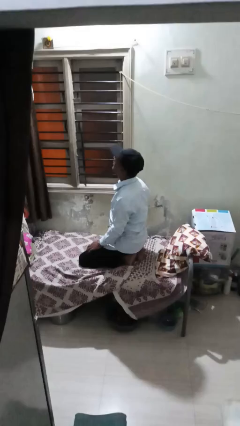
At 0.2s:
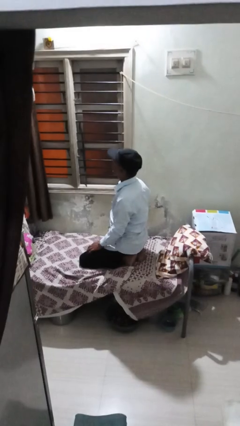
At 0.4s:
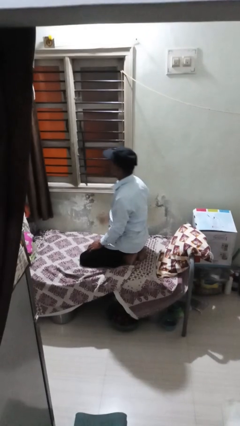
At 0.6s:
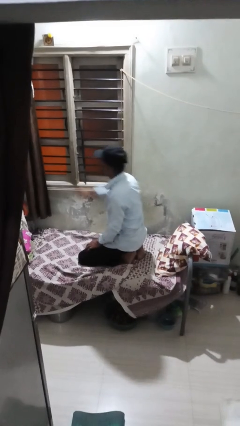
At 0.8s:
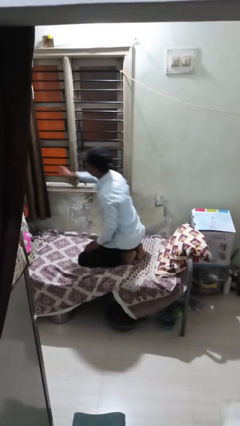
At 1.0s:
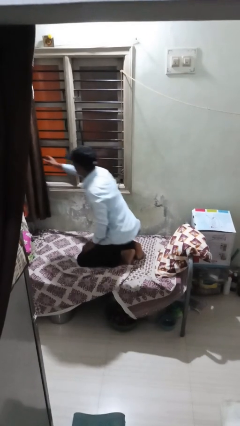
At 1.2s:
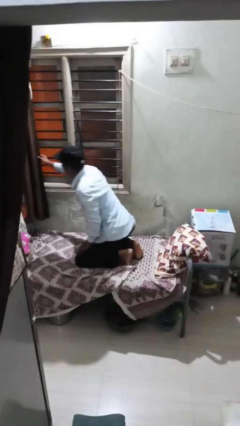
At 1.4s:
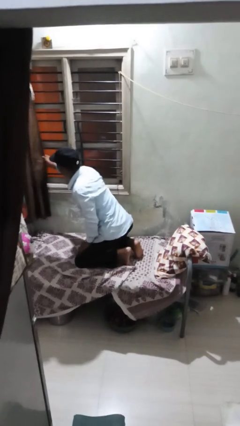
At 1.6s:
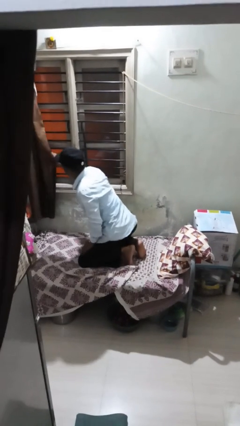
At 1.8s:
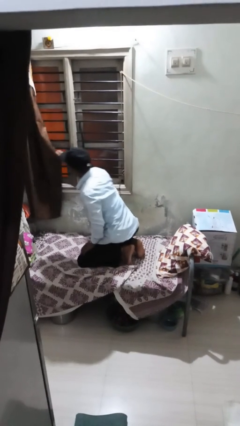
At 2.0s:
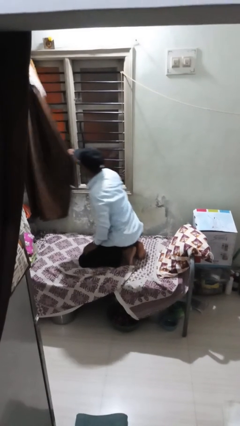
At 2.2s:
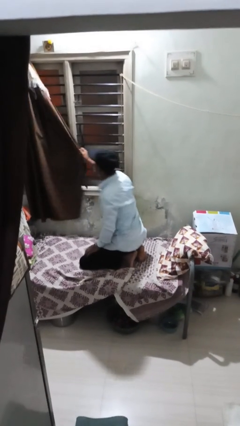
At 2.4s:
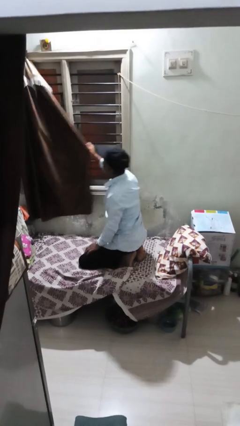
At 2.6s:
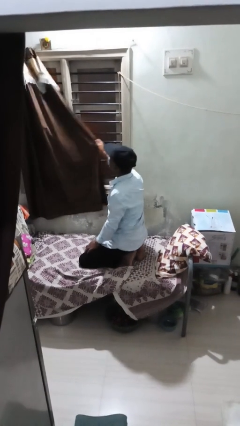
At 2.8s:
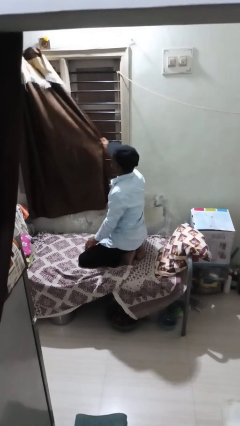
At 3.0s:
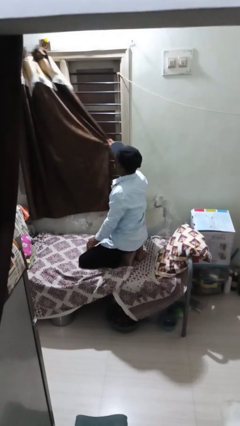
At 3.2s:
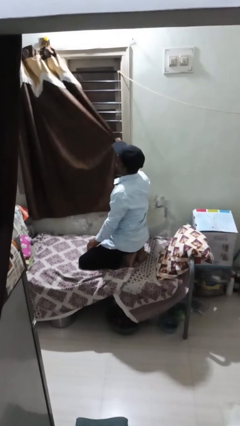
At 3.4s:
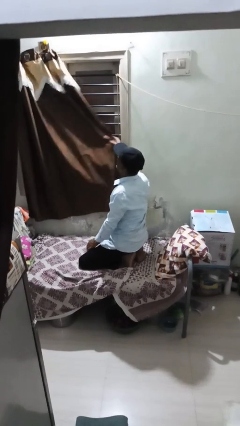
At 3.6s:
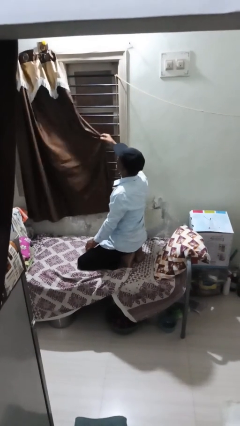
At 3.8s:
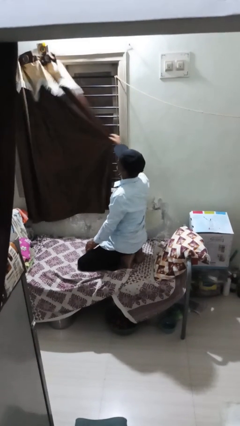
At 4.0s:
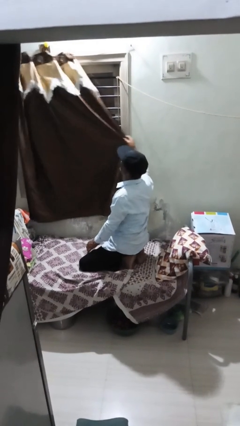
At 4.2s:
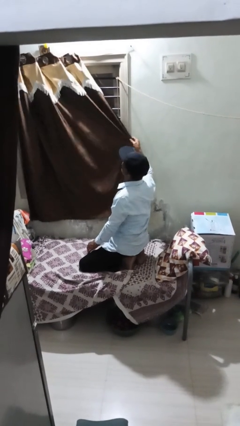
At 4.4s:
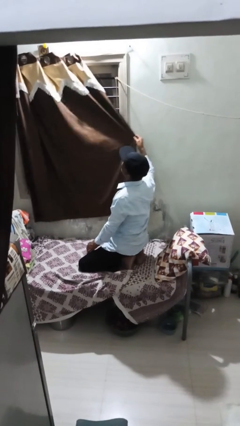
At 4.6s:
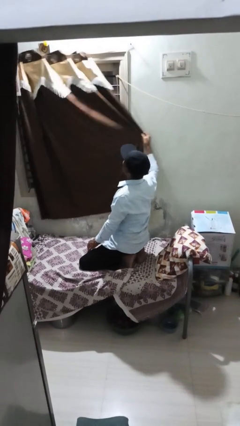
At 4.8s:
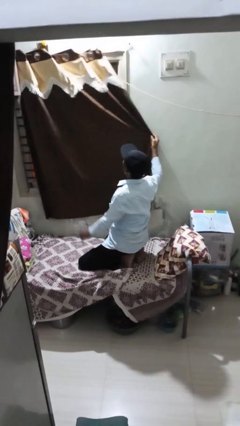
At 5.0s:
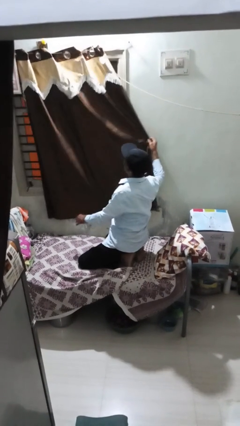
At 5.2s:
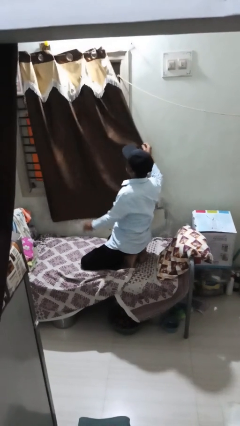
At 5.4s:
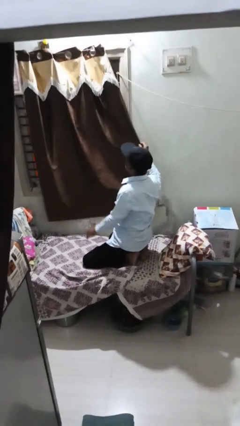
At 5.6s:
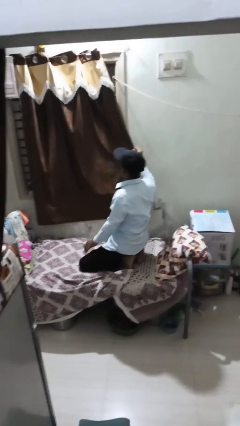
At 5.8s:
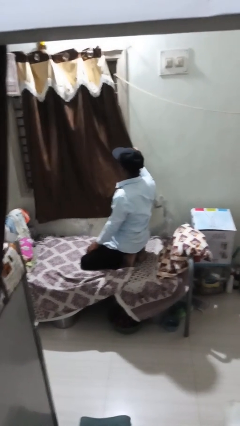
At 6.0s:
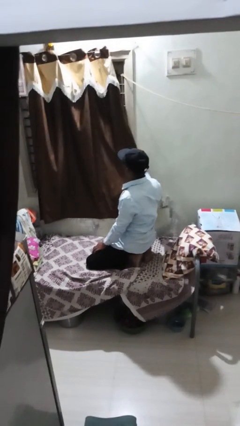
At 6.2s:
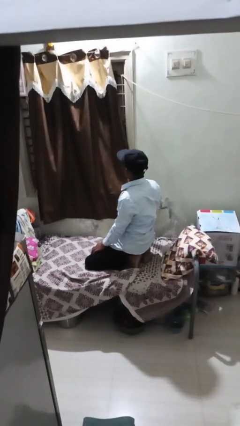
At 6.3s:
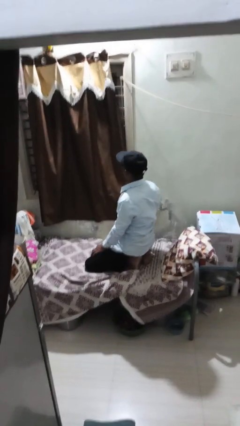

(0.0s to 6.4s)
person closes curtains

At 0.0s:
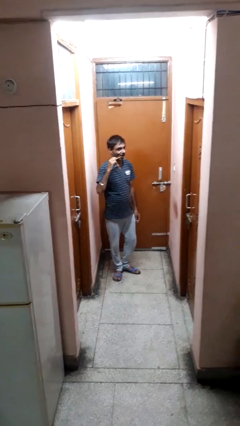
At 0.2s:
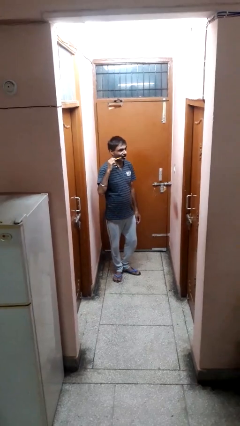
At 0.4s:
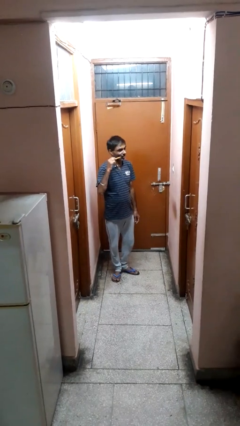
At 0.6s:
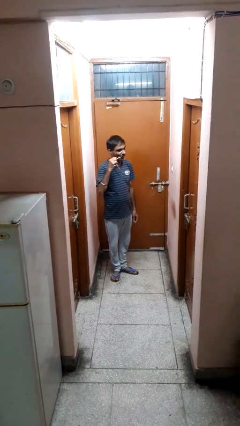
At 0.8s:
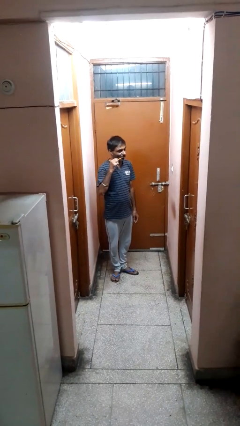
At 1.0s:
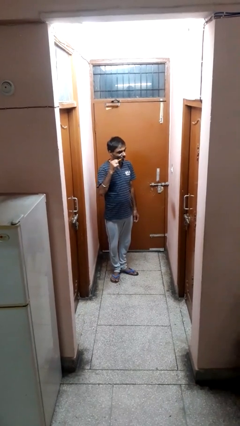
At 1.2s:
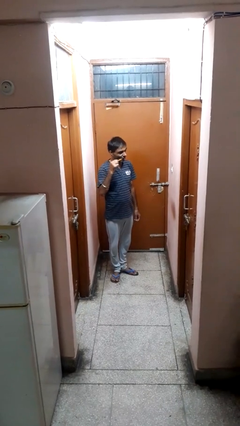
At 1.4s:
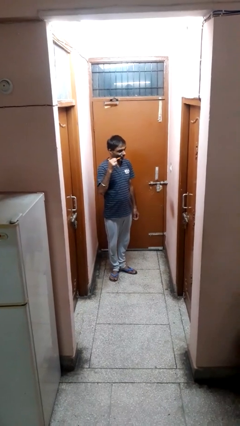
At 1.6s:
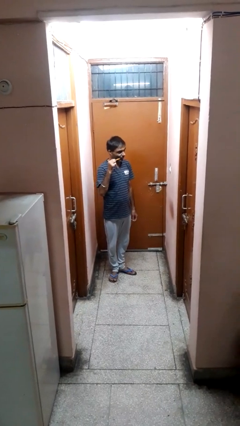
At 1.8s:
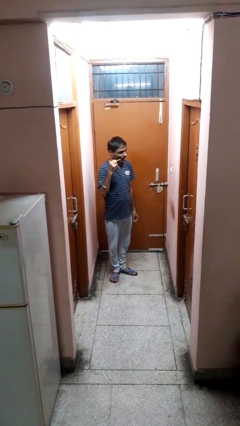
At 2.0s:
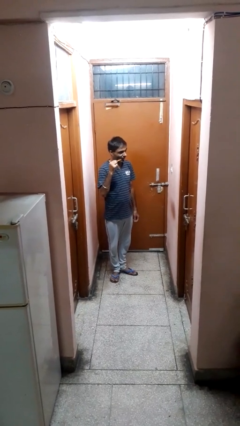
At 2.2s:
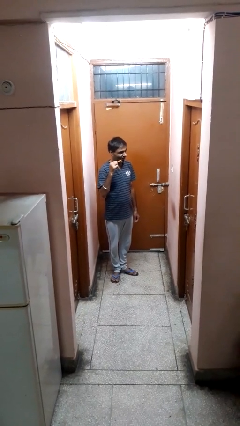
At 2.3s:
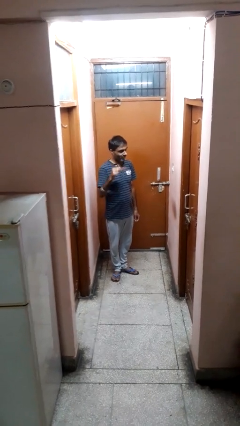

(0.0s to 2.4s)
person brushes teeth

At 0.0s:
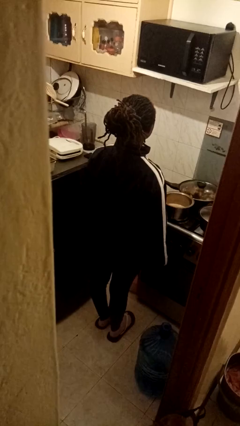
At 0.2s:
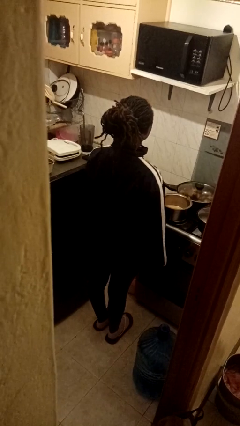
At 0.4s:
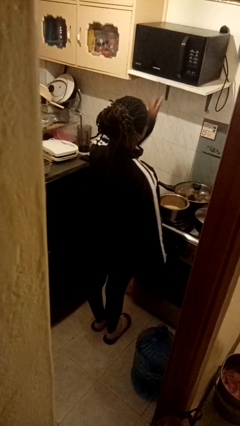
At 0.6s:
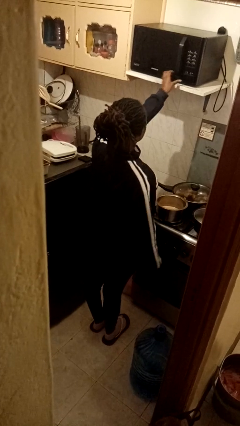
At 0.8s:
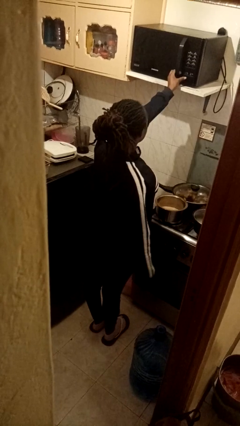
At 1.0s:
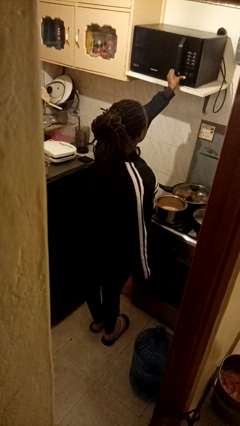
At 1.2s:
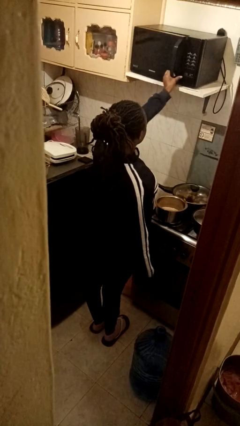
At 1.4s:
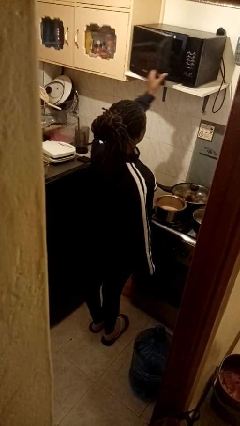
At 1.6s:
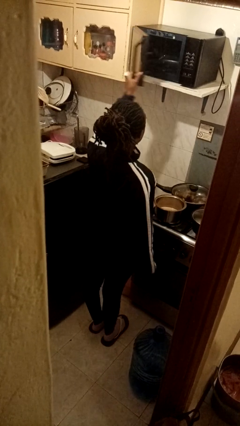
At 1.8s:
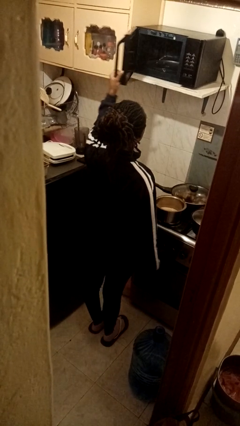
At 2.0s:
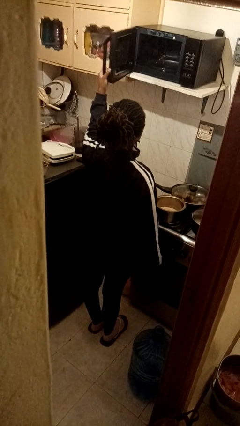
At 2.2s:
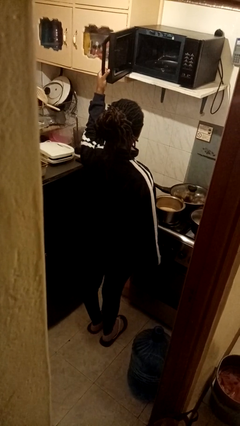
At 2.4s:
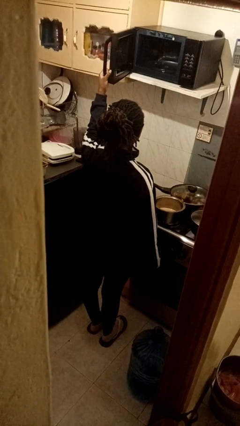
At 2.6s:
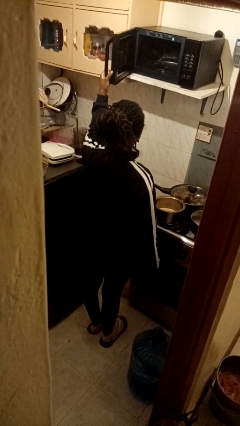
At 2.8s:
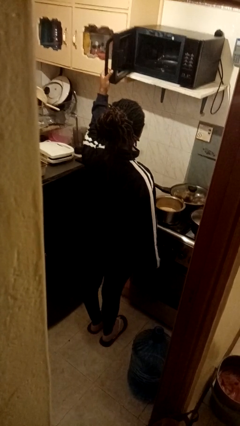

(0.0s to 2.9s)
person opens microwave

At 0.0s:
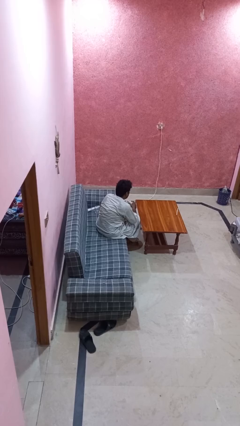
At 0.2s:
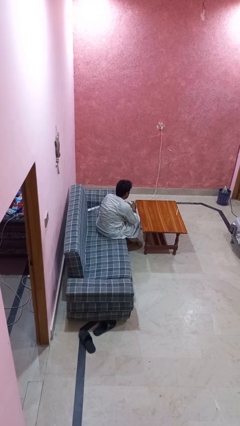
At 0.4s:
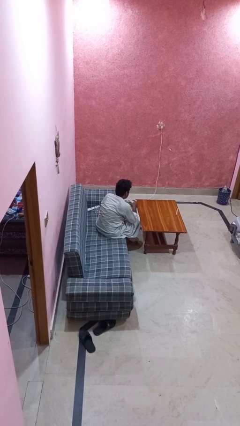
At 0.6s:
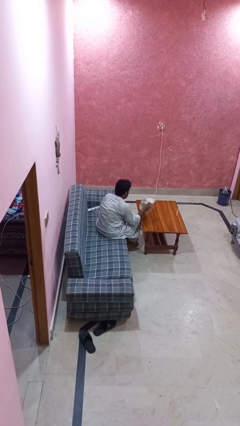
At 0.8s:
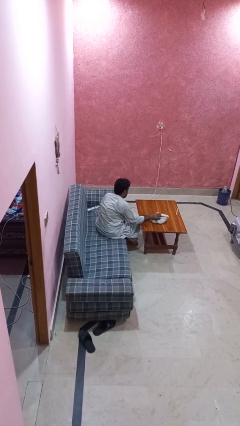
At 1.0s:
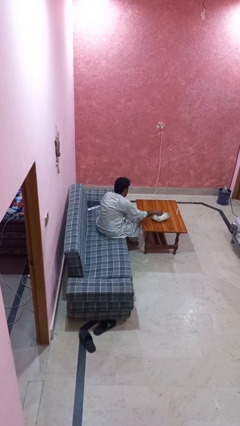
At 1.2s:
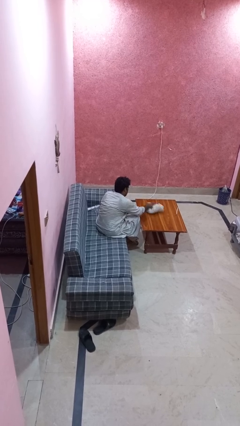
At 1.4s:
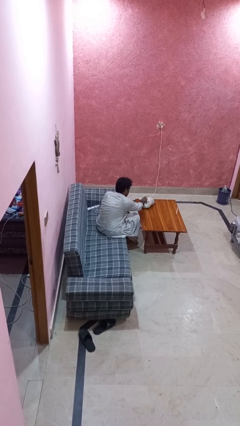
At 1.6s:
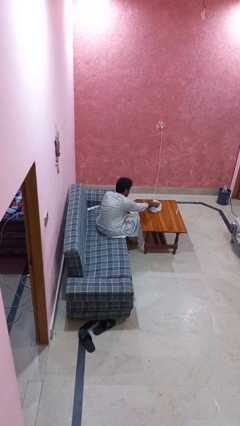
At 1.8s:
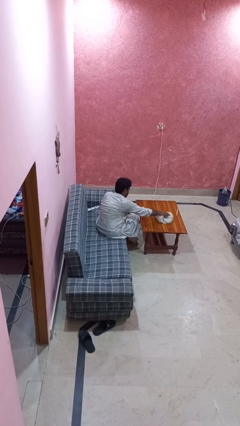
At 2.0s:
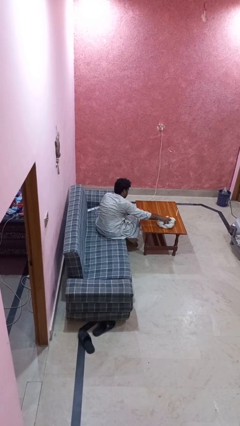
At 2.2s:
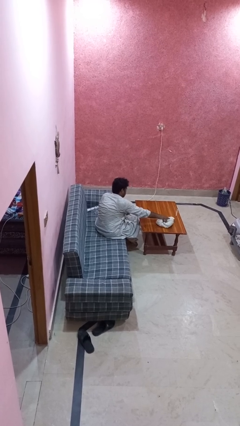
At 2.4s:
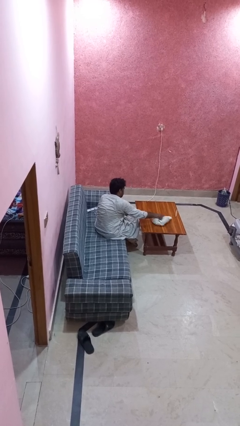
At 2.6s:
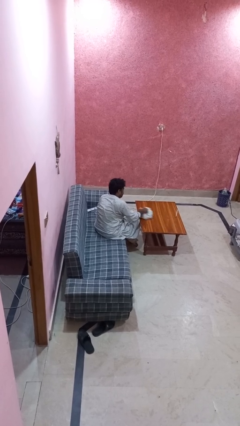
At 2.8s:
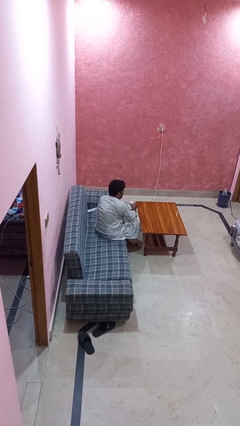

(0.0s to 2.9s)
person cleans table with rag

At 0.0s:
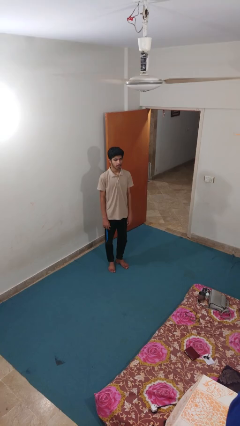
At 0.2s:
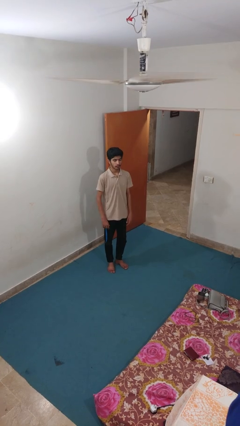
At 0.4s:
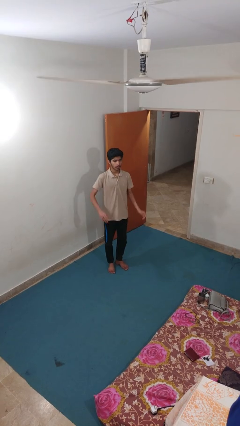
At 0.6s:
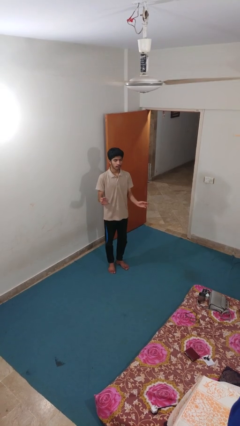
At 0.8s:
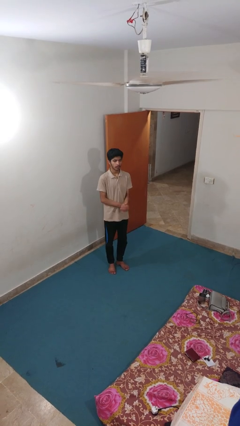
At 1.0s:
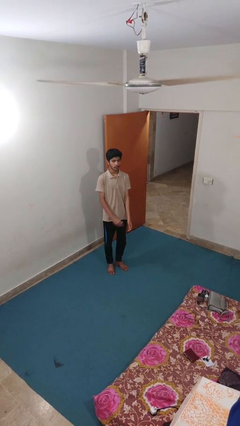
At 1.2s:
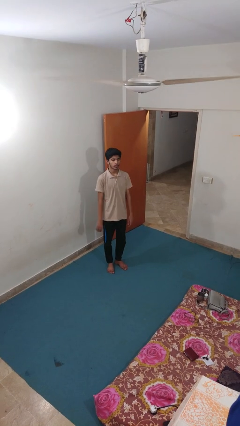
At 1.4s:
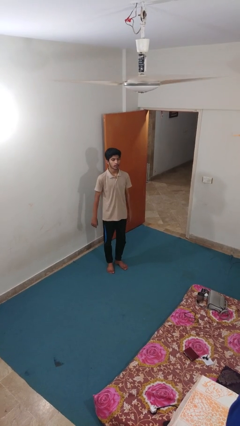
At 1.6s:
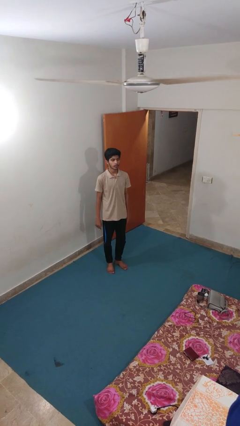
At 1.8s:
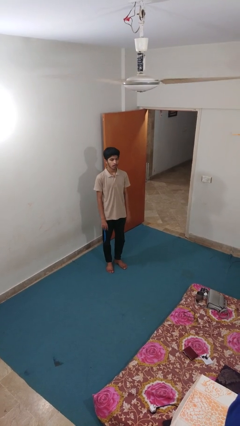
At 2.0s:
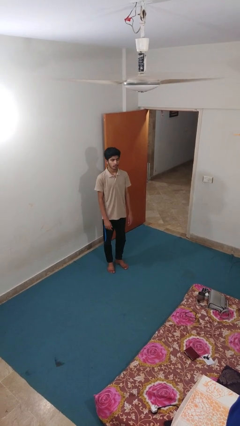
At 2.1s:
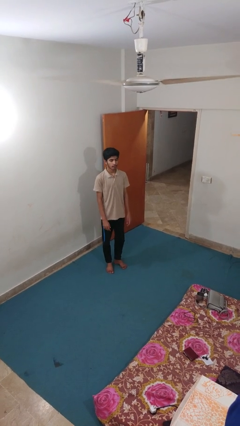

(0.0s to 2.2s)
person claps hands

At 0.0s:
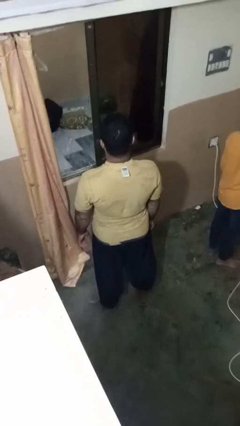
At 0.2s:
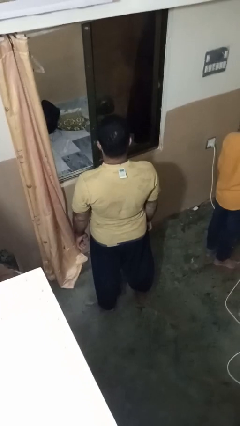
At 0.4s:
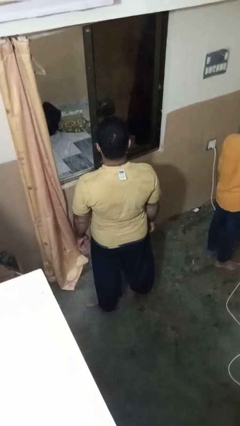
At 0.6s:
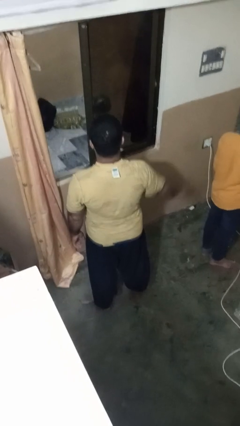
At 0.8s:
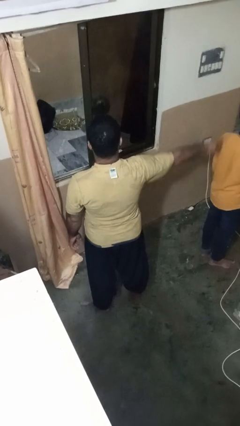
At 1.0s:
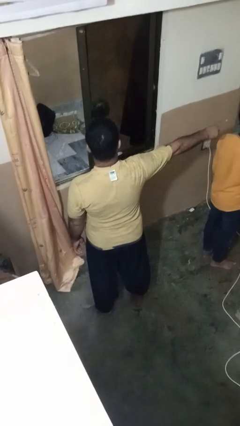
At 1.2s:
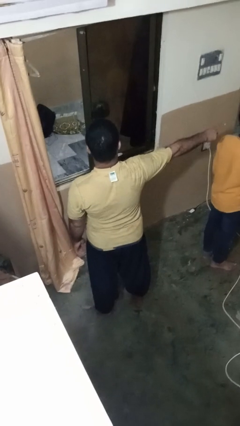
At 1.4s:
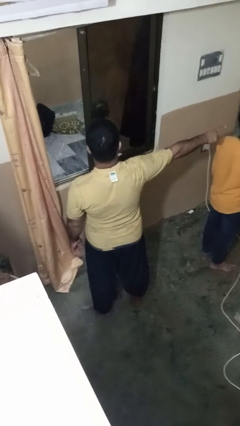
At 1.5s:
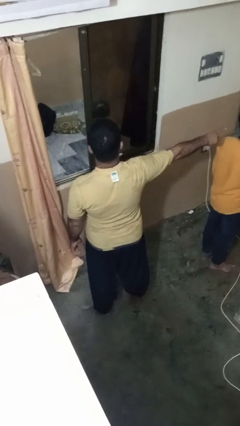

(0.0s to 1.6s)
person points at person
